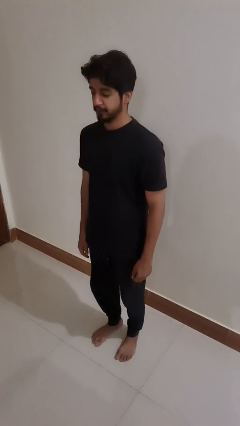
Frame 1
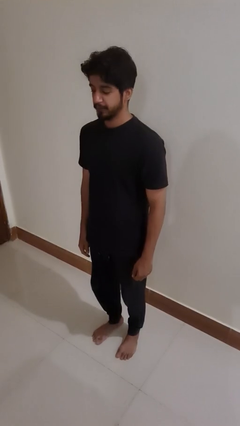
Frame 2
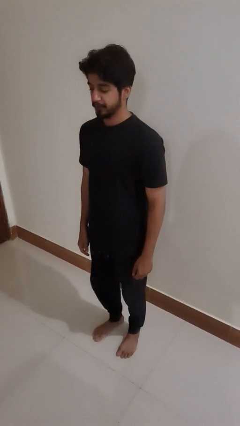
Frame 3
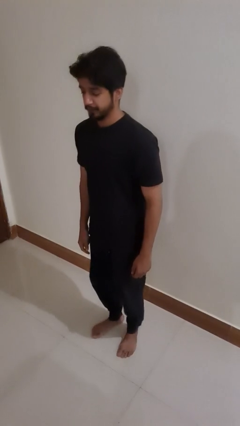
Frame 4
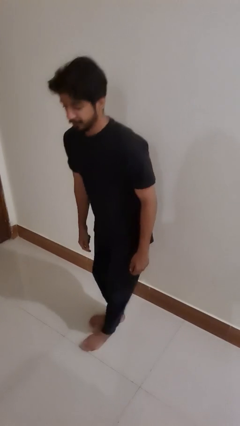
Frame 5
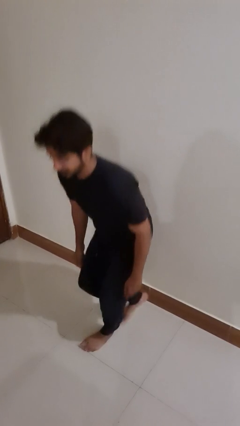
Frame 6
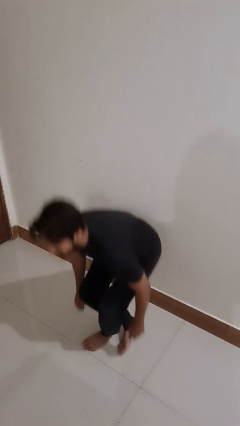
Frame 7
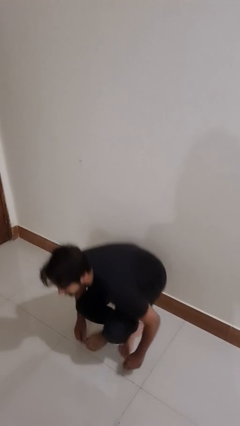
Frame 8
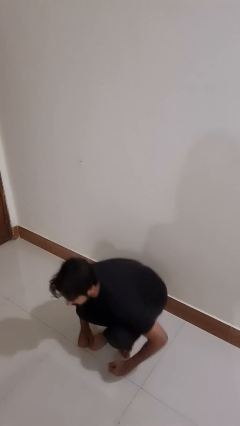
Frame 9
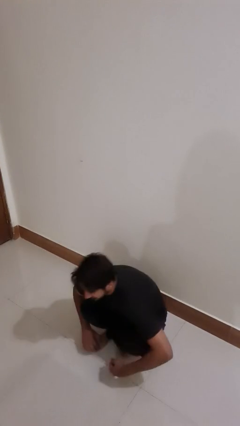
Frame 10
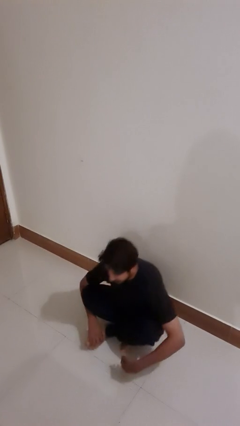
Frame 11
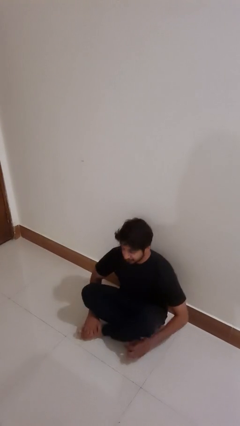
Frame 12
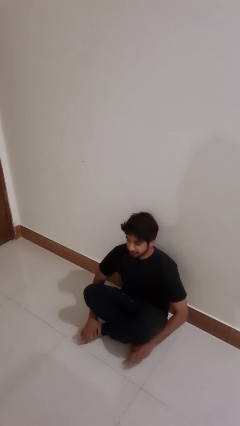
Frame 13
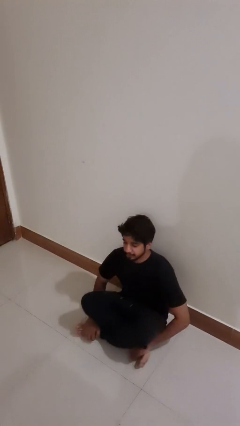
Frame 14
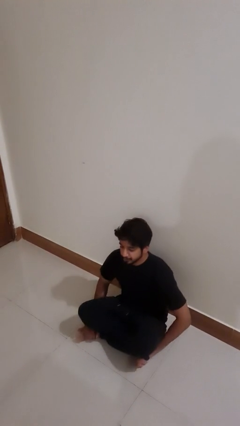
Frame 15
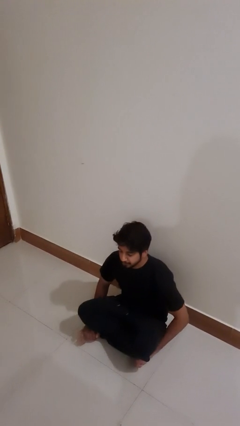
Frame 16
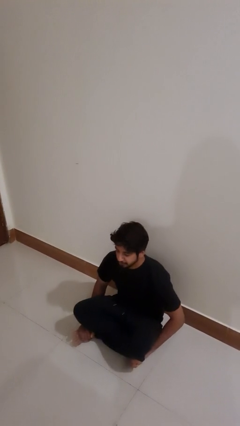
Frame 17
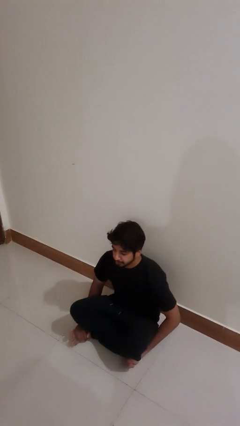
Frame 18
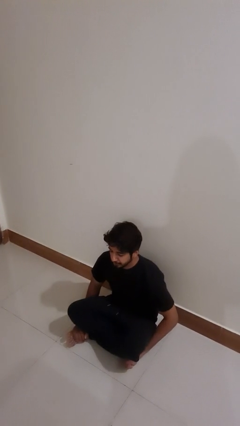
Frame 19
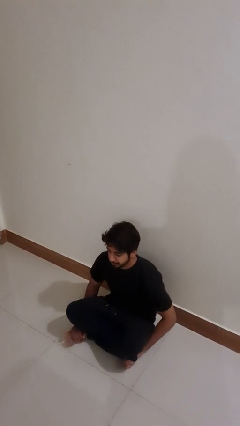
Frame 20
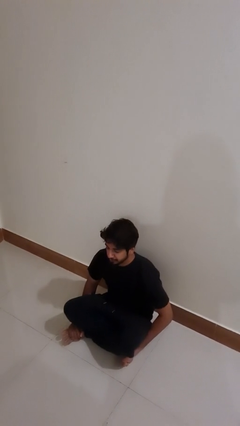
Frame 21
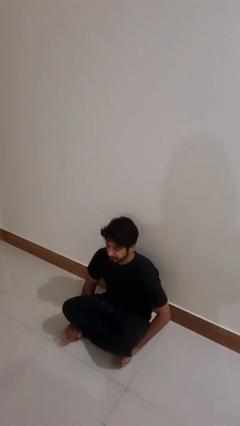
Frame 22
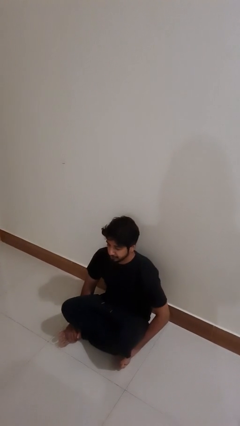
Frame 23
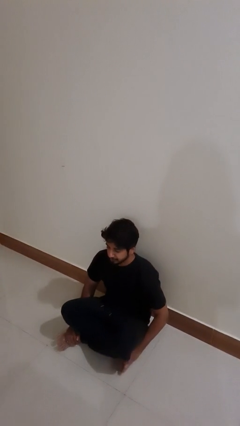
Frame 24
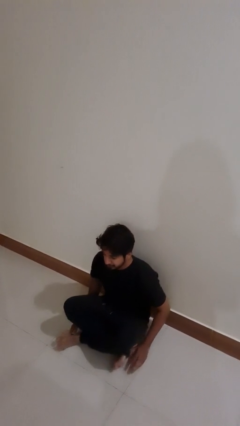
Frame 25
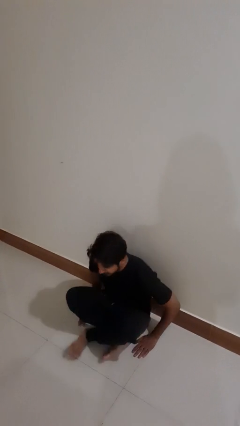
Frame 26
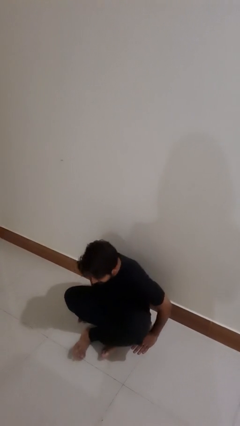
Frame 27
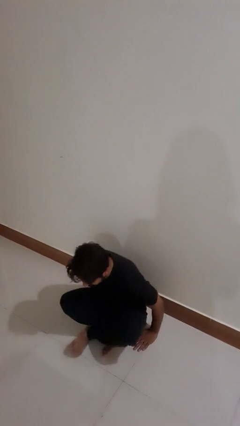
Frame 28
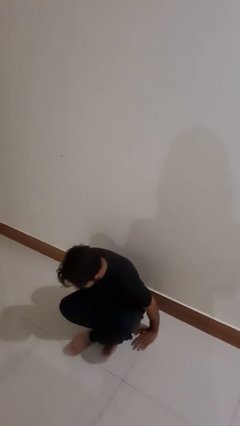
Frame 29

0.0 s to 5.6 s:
person sits crisscross

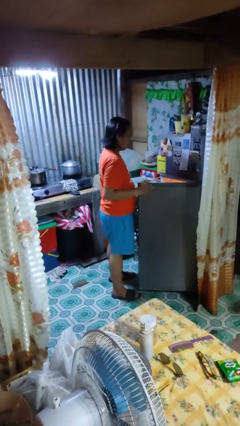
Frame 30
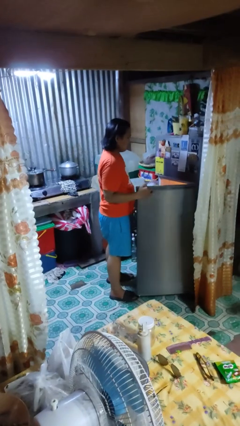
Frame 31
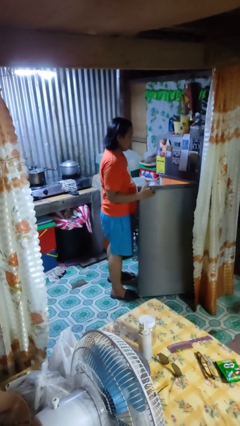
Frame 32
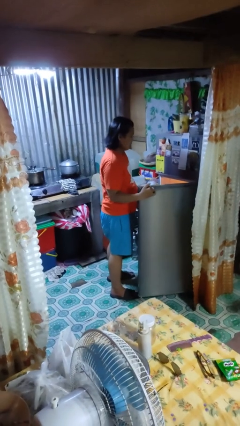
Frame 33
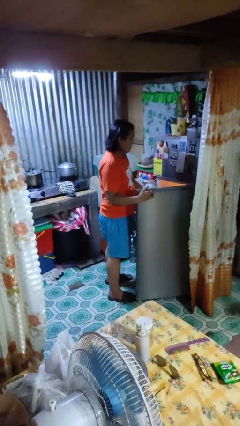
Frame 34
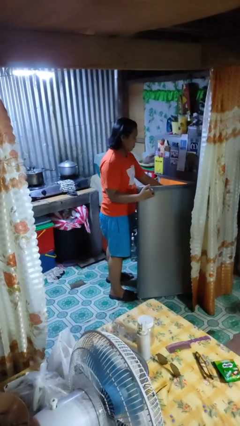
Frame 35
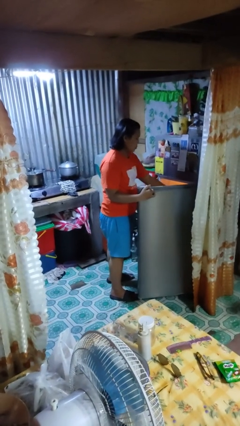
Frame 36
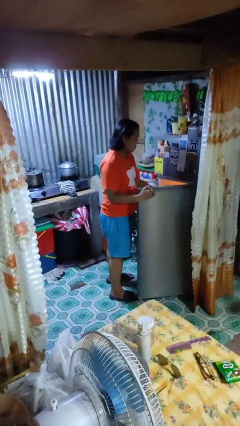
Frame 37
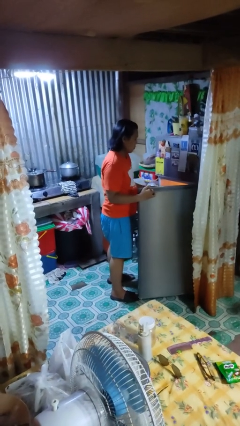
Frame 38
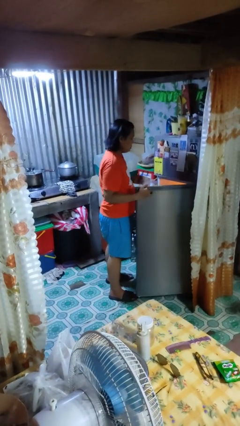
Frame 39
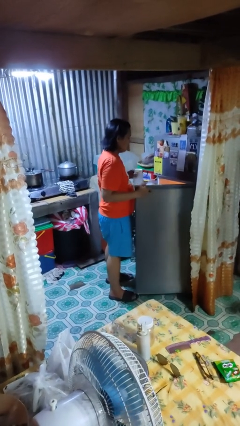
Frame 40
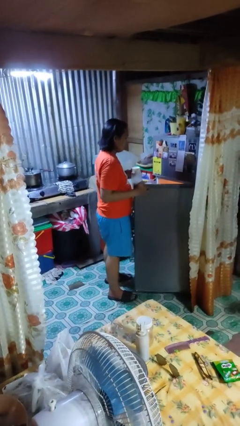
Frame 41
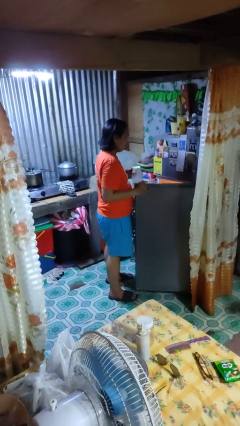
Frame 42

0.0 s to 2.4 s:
person takes object from refrigerator

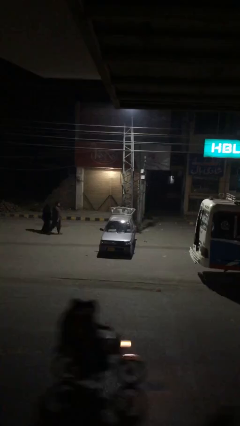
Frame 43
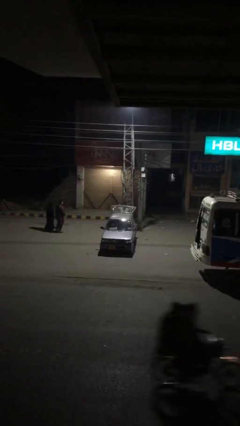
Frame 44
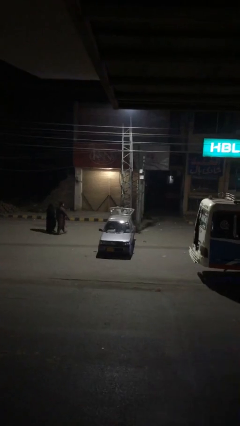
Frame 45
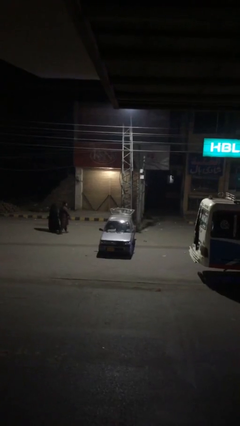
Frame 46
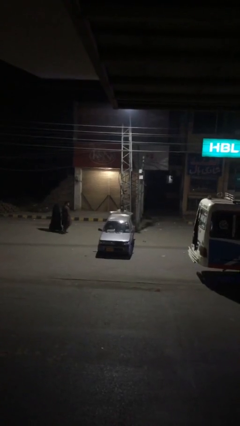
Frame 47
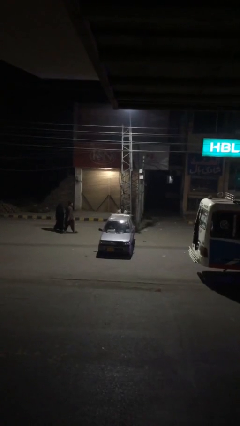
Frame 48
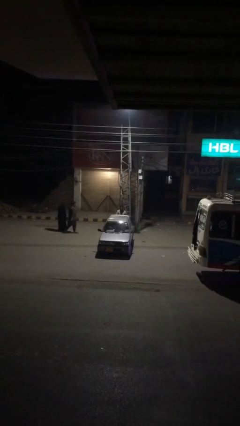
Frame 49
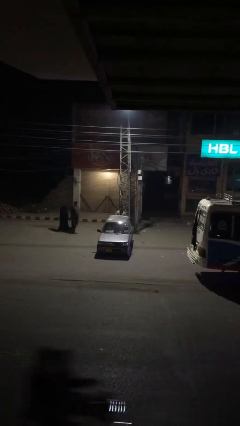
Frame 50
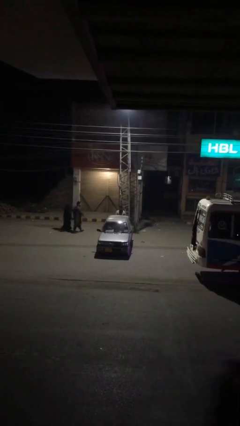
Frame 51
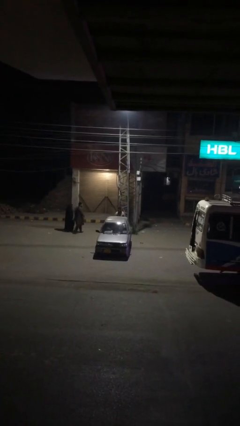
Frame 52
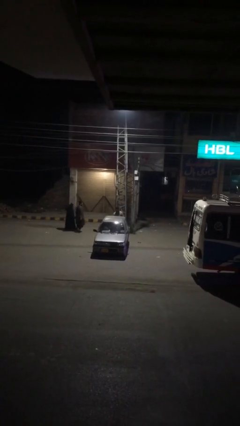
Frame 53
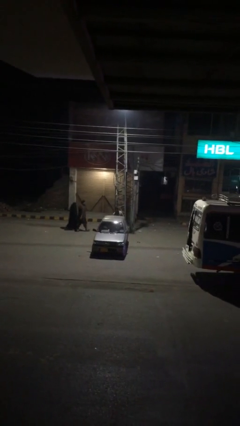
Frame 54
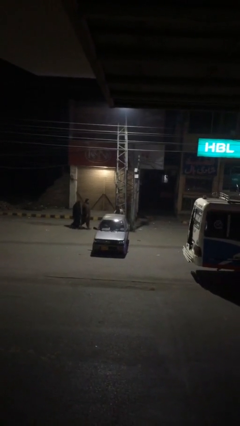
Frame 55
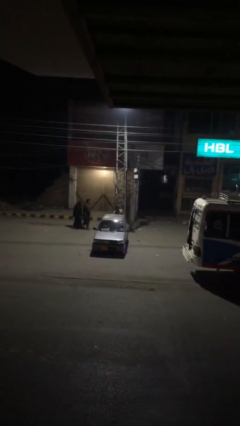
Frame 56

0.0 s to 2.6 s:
person closes car trunk

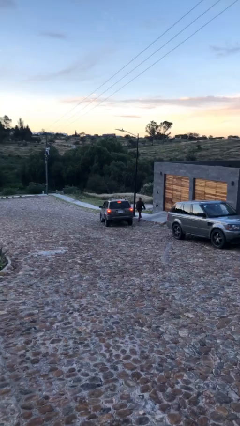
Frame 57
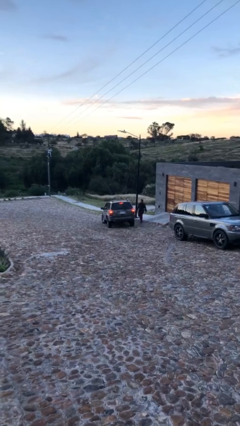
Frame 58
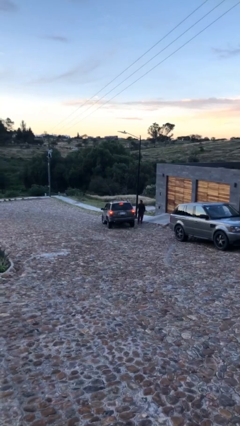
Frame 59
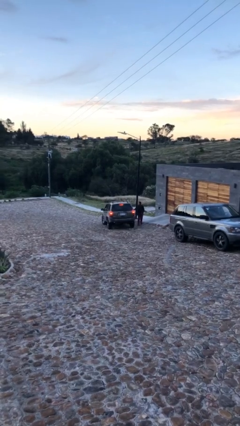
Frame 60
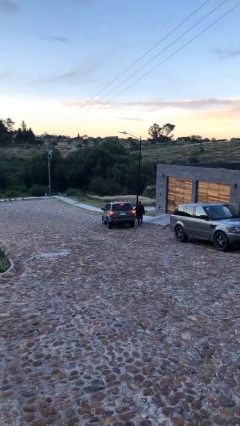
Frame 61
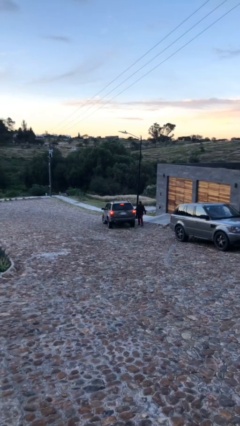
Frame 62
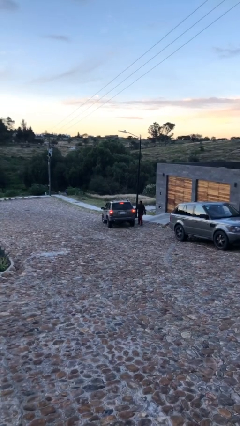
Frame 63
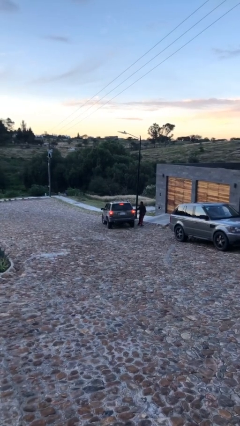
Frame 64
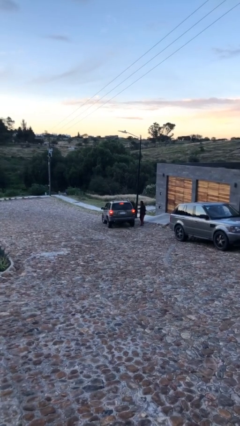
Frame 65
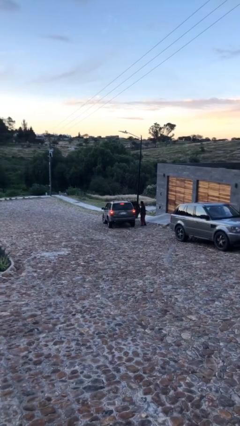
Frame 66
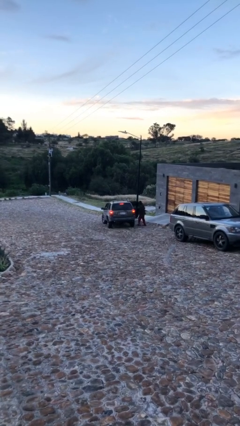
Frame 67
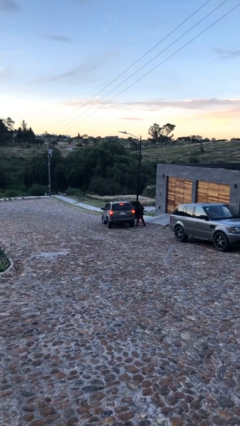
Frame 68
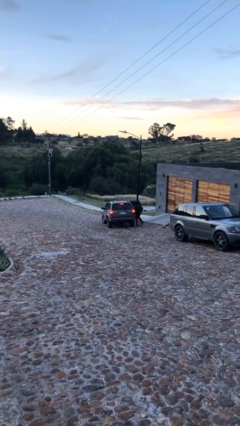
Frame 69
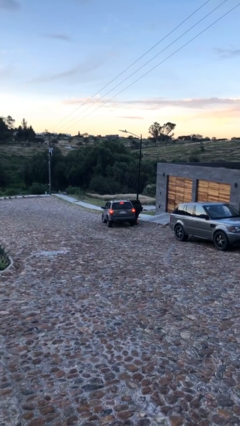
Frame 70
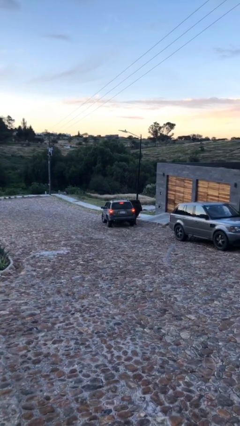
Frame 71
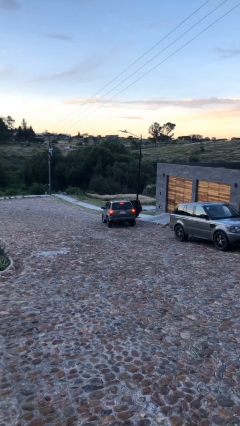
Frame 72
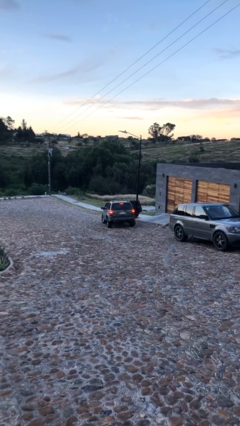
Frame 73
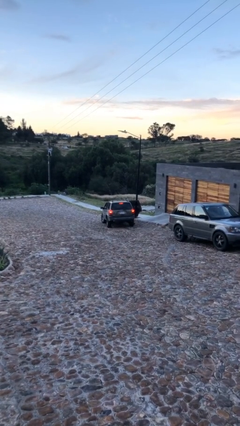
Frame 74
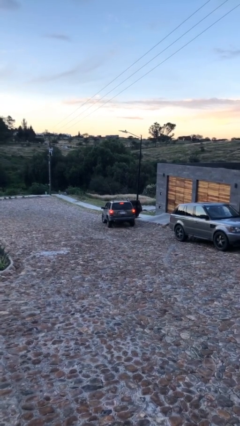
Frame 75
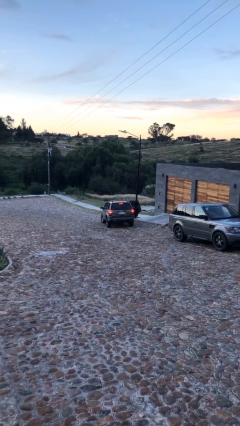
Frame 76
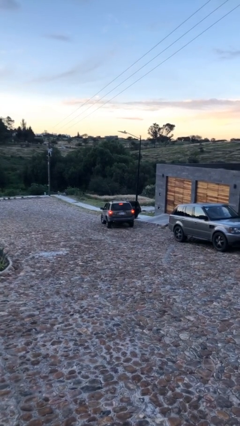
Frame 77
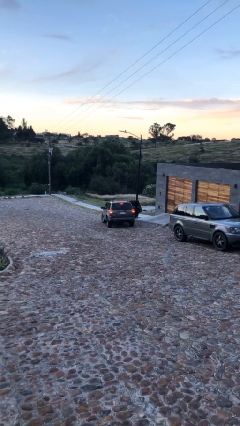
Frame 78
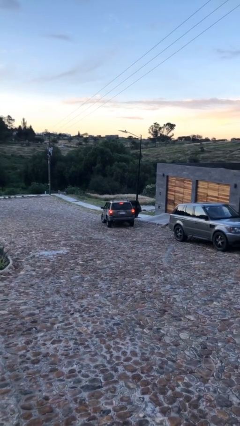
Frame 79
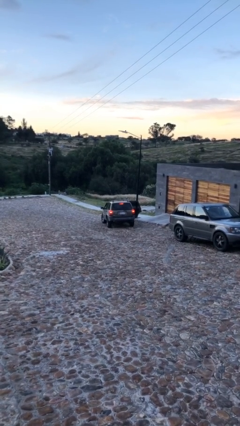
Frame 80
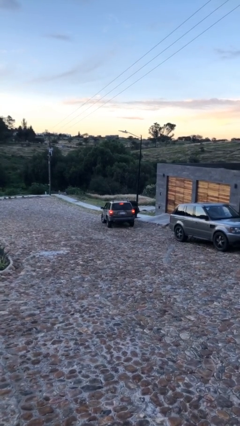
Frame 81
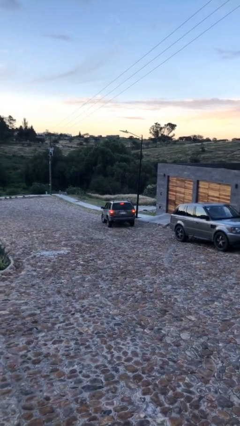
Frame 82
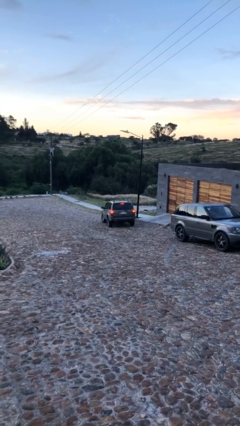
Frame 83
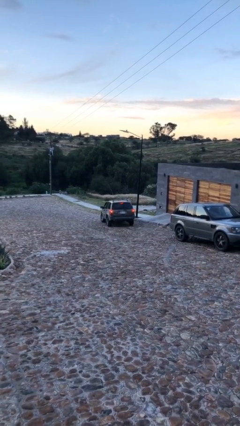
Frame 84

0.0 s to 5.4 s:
car picks up person

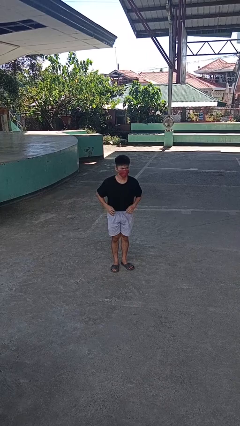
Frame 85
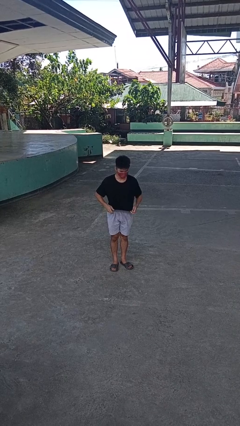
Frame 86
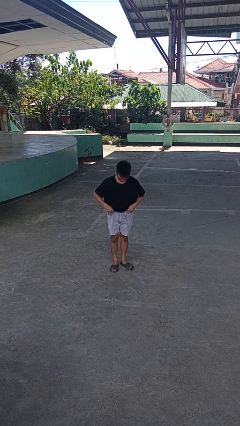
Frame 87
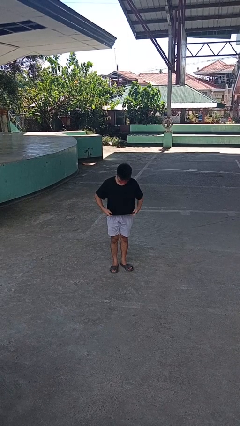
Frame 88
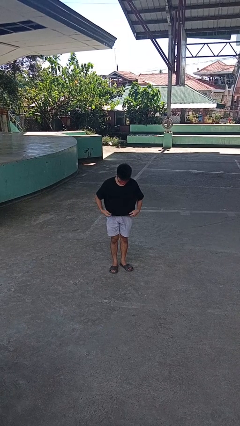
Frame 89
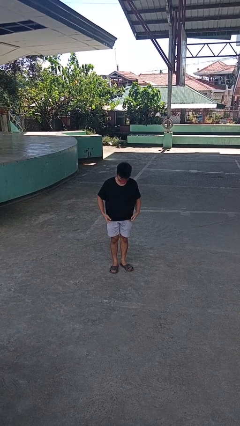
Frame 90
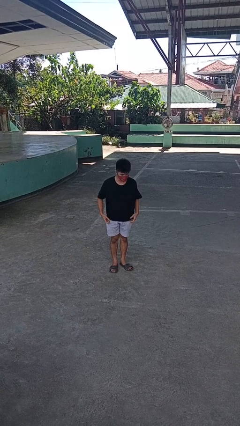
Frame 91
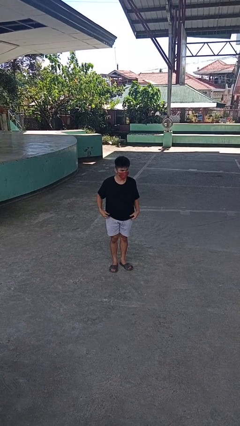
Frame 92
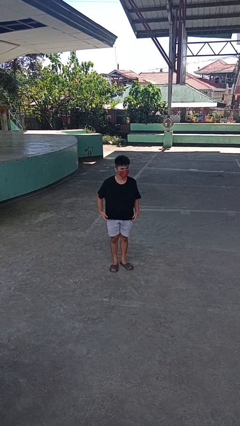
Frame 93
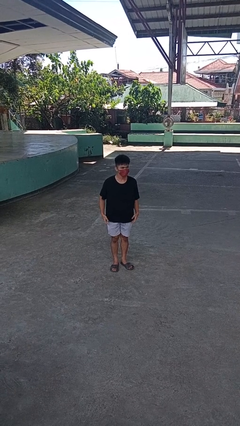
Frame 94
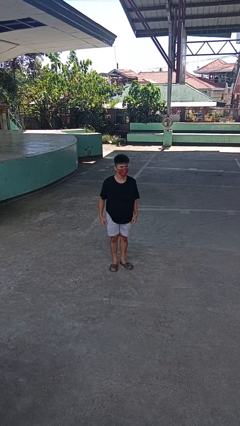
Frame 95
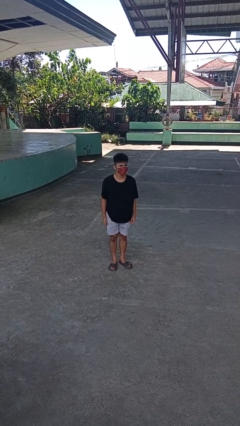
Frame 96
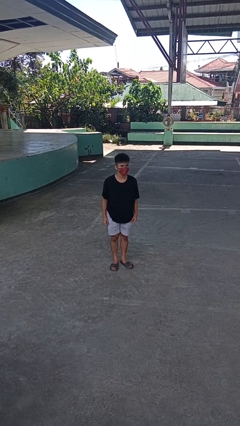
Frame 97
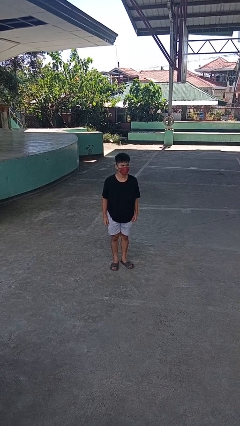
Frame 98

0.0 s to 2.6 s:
person untucks shirt
